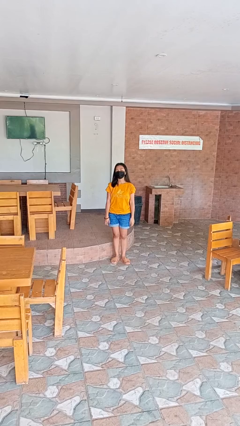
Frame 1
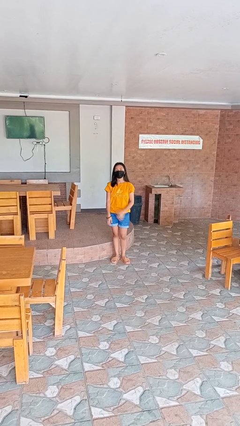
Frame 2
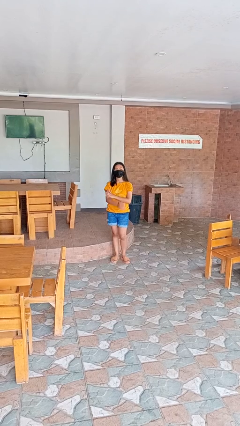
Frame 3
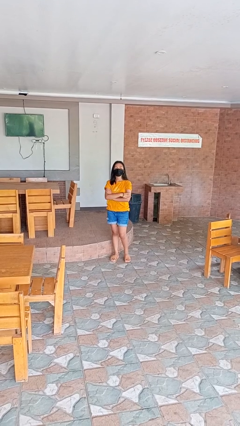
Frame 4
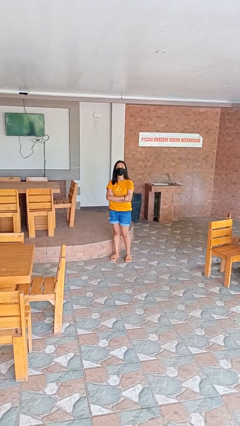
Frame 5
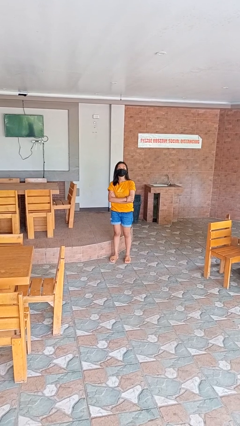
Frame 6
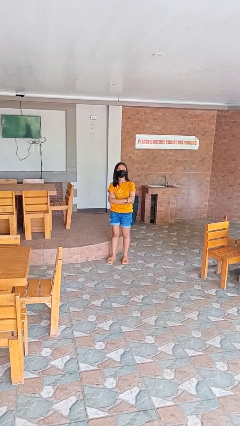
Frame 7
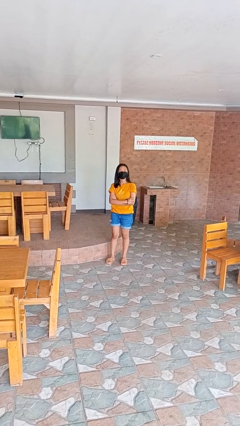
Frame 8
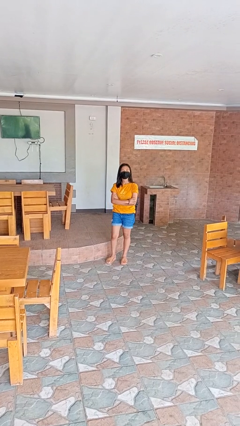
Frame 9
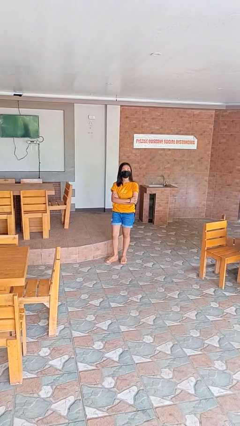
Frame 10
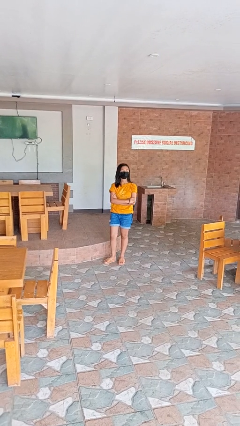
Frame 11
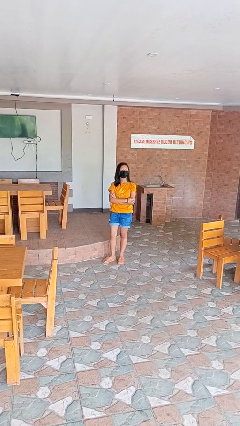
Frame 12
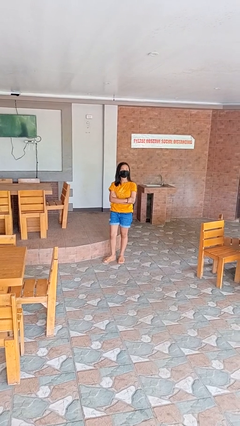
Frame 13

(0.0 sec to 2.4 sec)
person crosses arms

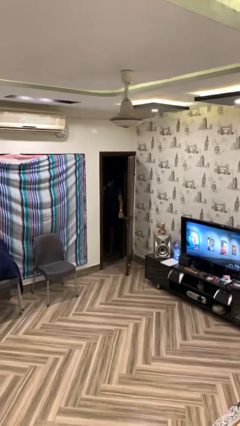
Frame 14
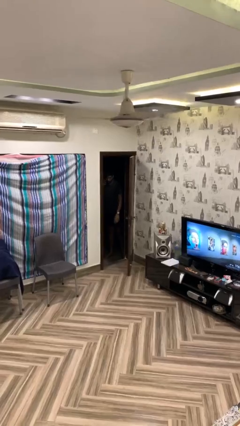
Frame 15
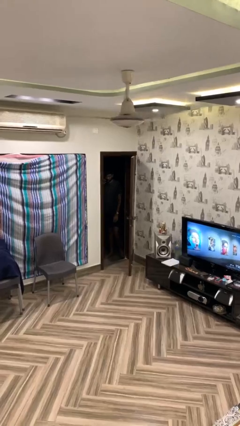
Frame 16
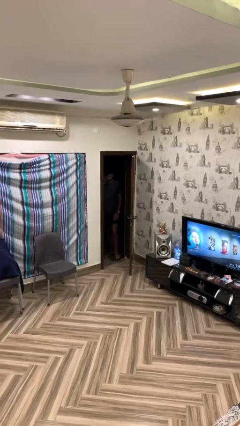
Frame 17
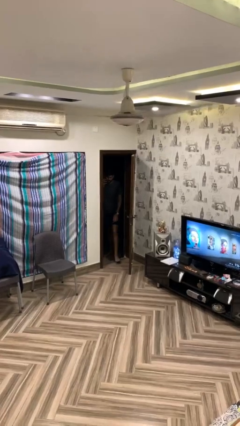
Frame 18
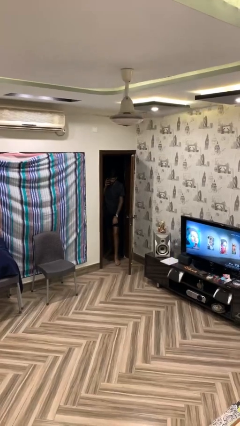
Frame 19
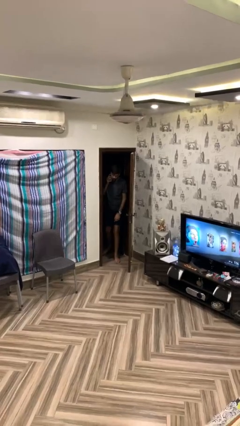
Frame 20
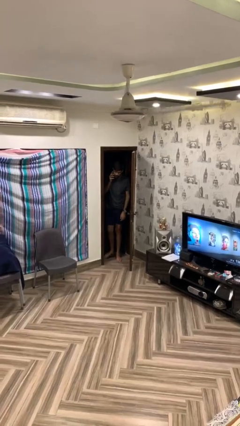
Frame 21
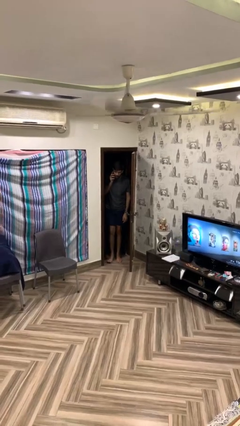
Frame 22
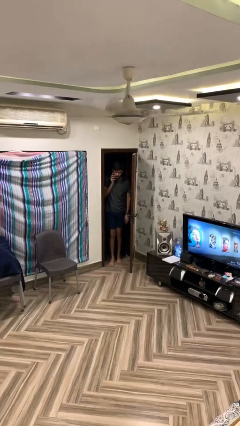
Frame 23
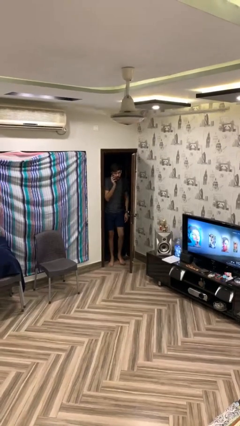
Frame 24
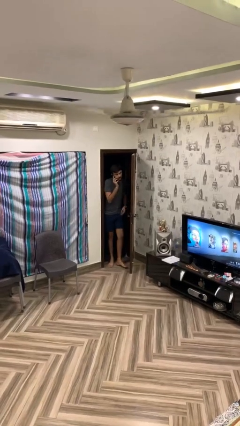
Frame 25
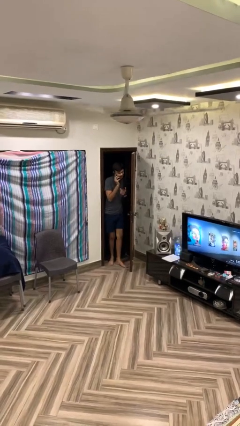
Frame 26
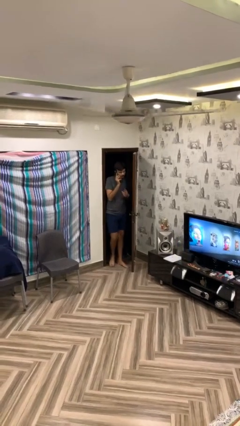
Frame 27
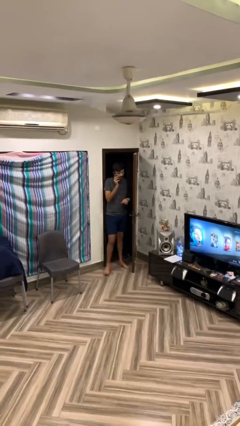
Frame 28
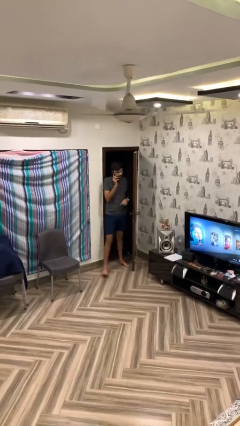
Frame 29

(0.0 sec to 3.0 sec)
person enters scene through structure

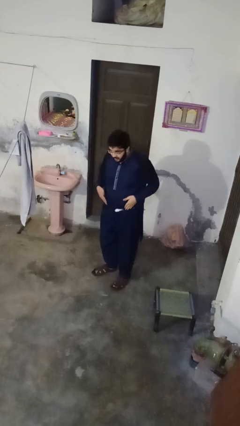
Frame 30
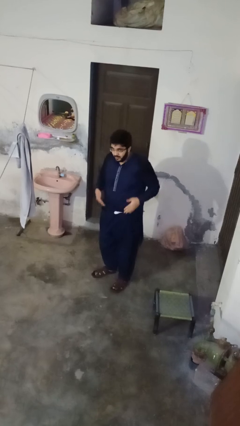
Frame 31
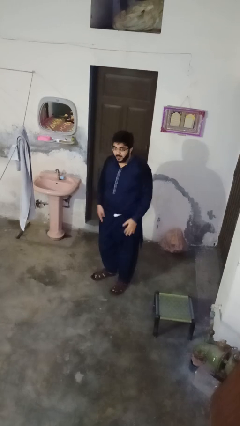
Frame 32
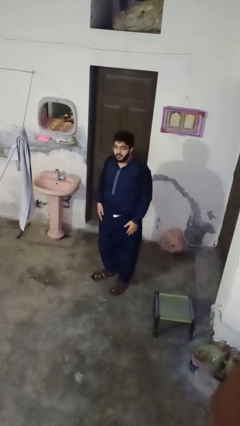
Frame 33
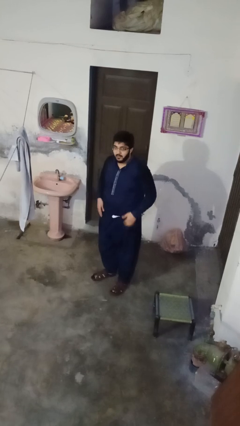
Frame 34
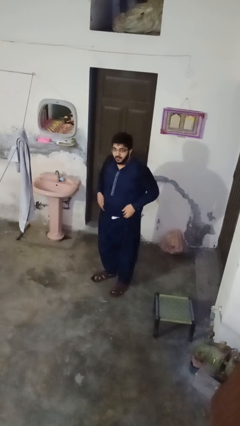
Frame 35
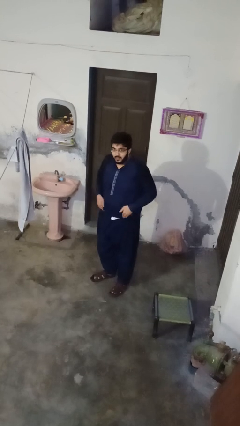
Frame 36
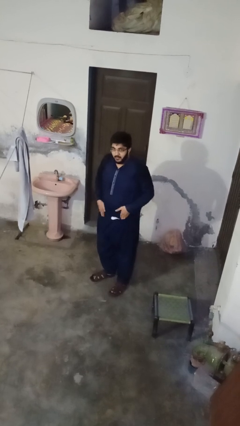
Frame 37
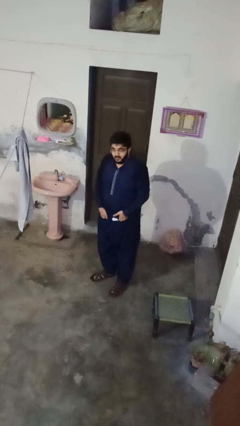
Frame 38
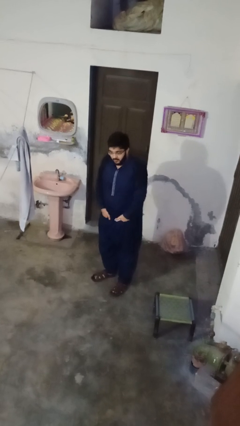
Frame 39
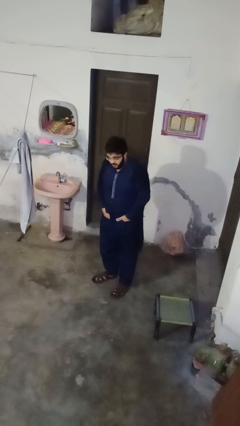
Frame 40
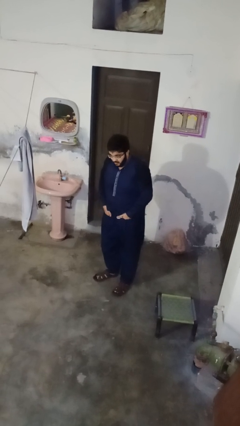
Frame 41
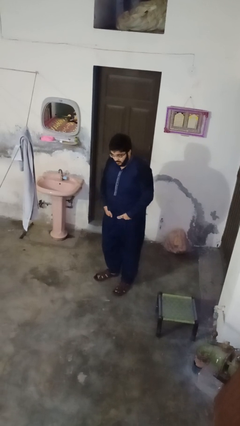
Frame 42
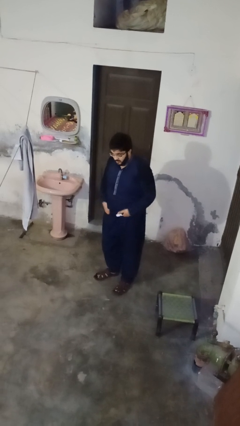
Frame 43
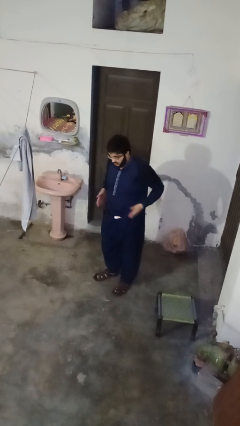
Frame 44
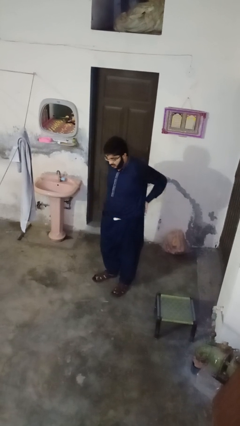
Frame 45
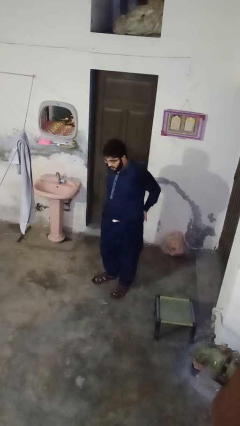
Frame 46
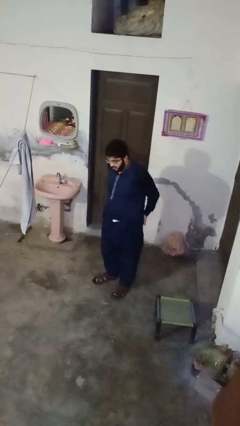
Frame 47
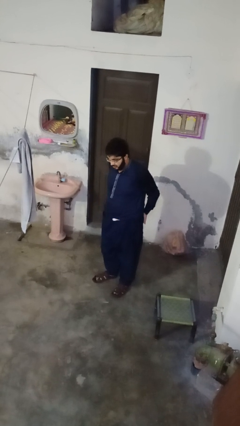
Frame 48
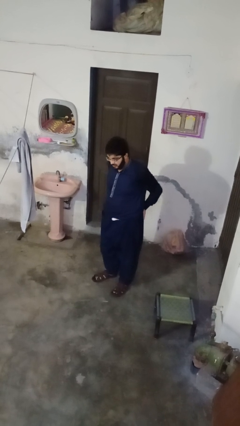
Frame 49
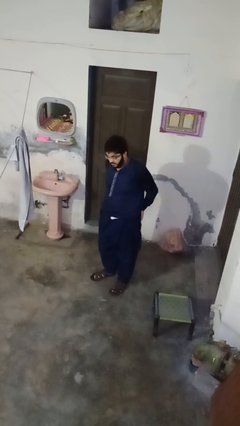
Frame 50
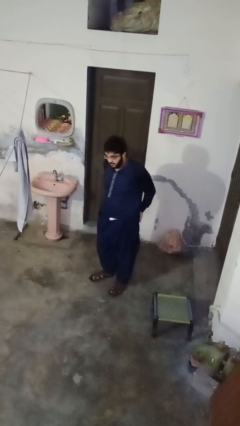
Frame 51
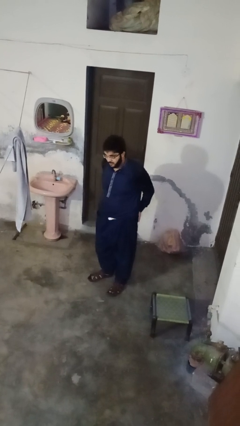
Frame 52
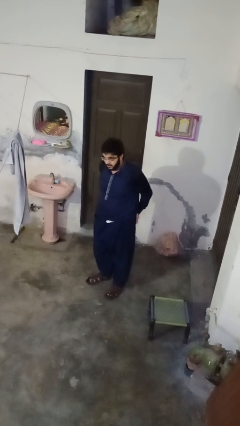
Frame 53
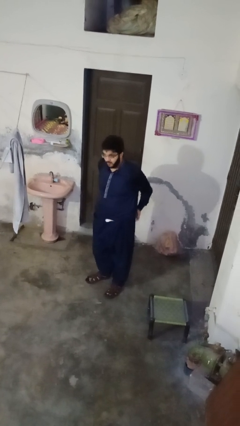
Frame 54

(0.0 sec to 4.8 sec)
person puts hands in back pockets

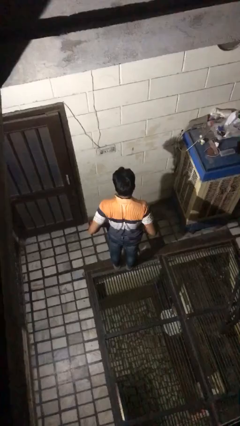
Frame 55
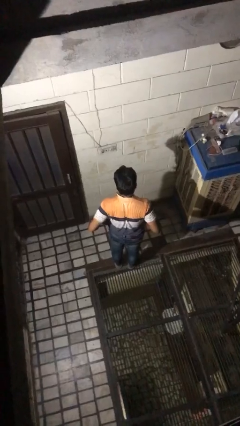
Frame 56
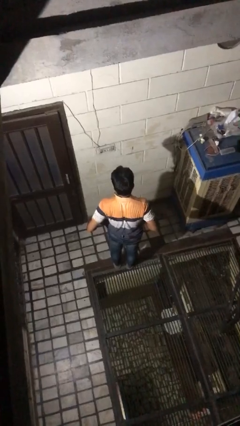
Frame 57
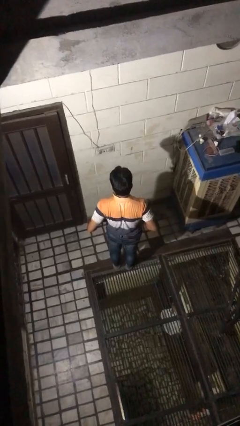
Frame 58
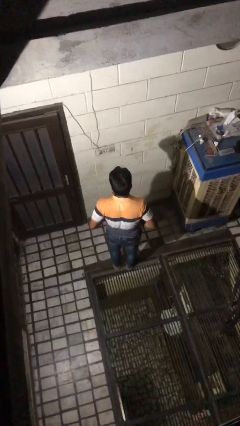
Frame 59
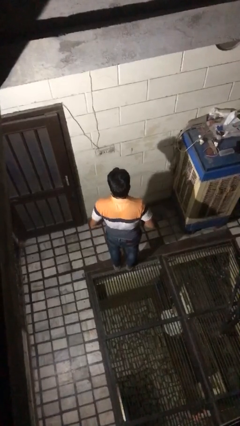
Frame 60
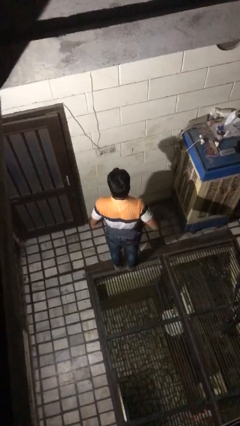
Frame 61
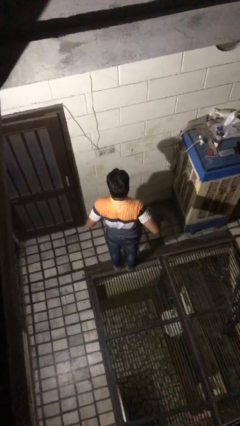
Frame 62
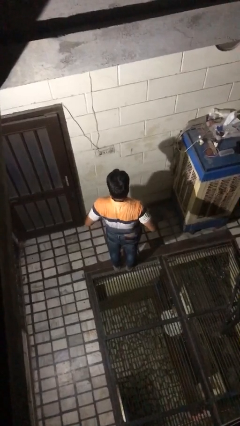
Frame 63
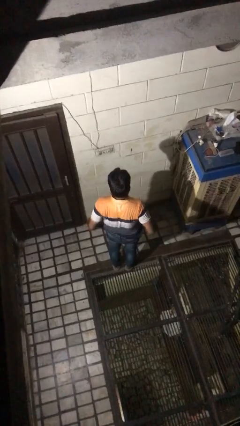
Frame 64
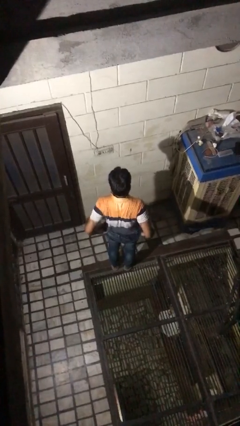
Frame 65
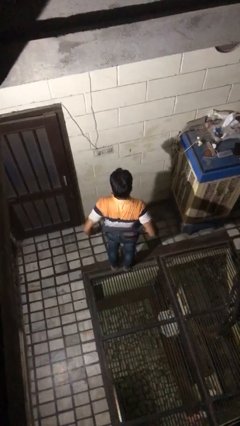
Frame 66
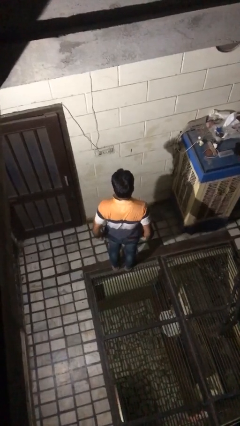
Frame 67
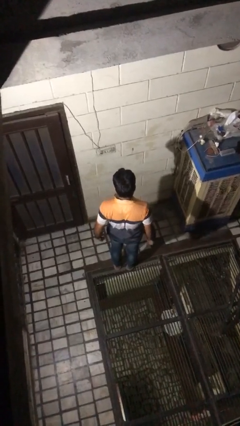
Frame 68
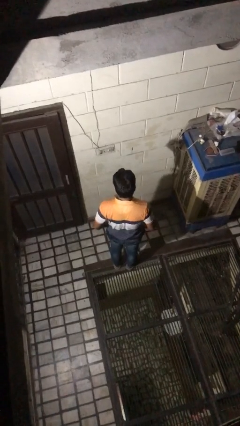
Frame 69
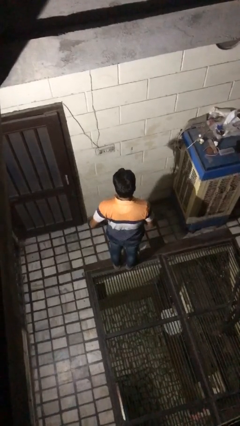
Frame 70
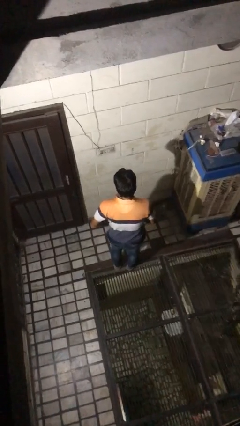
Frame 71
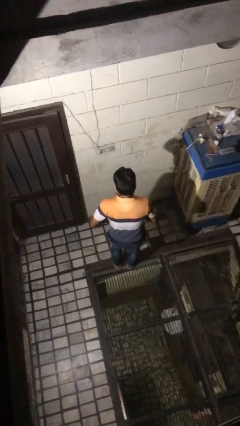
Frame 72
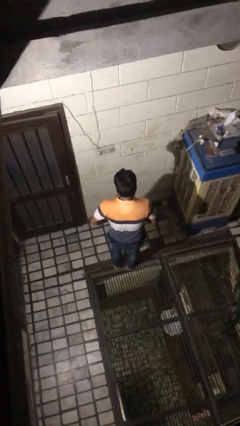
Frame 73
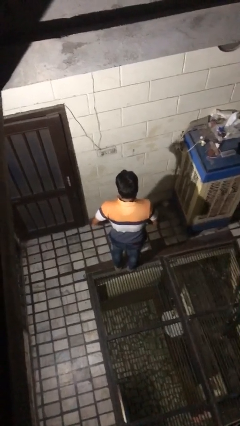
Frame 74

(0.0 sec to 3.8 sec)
person untucks shirt

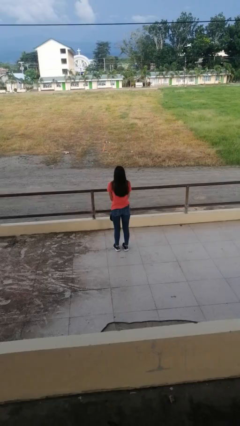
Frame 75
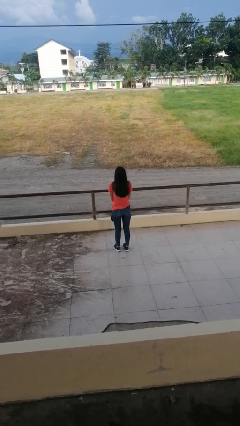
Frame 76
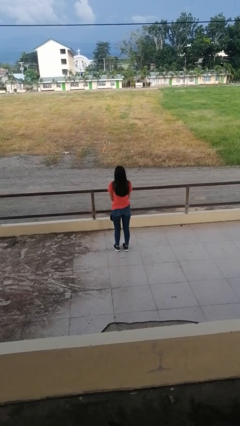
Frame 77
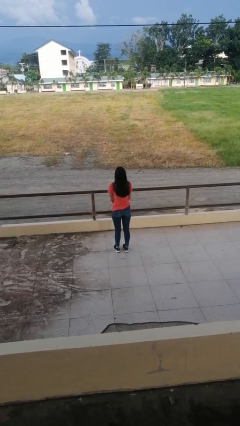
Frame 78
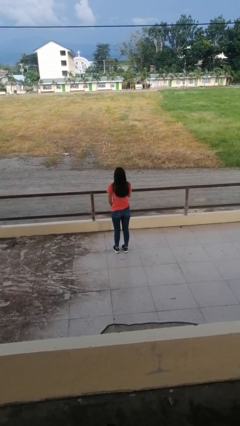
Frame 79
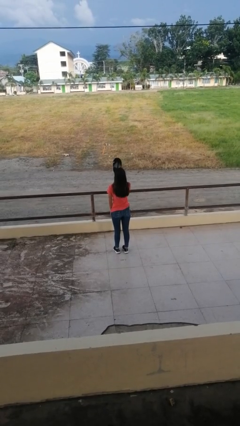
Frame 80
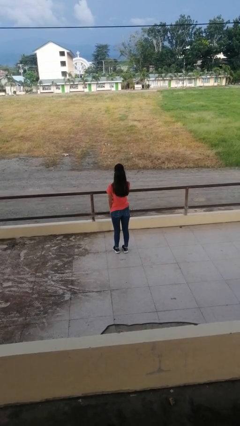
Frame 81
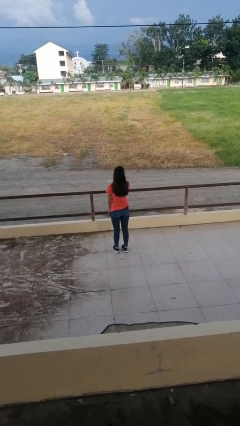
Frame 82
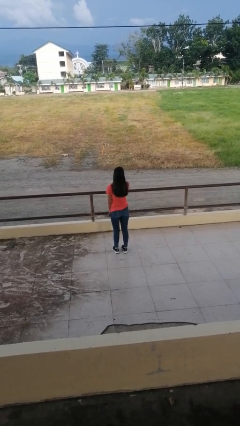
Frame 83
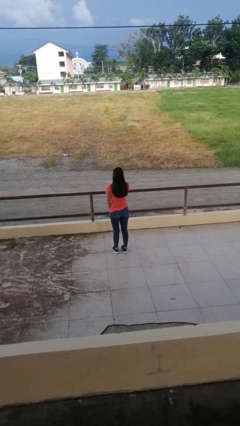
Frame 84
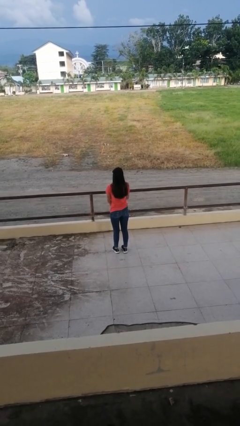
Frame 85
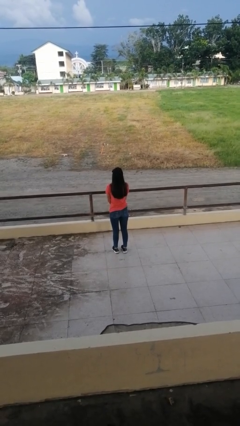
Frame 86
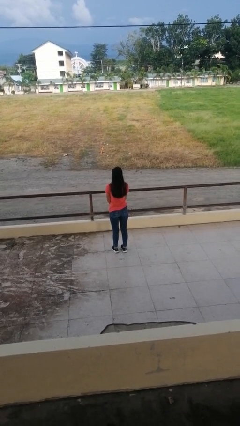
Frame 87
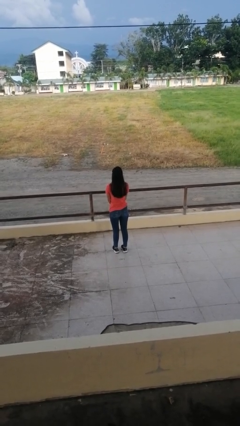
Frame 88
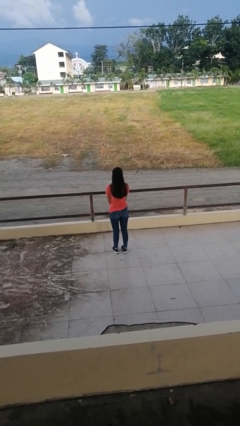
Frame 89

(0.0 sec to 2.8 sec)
person puts on hat

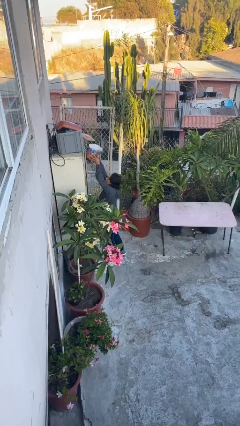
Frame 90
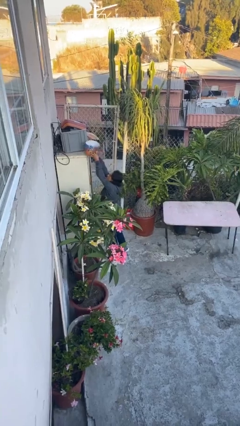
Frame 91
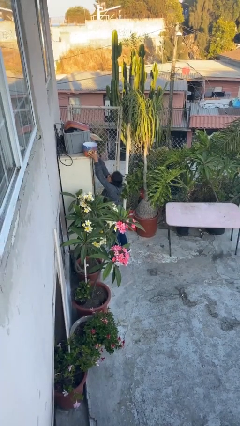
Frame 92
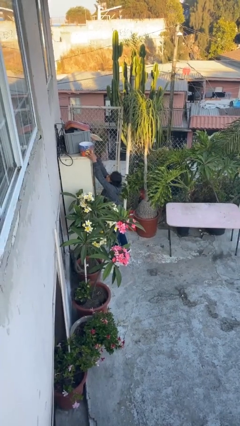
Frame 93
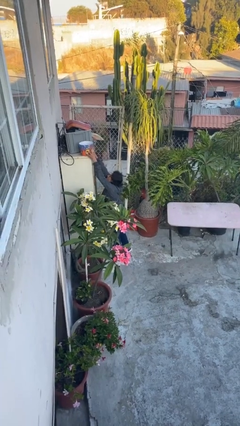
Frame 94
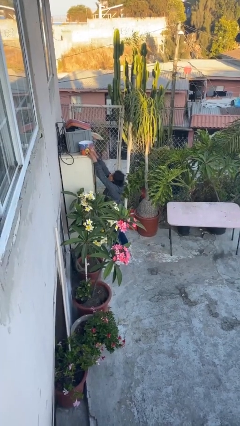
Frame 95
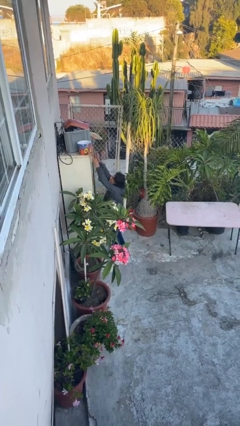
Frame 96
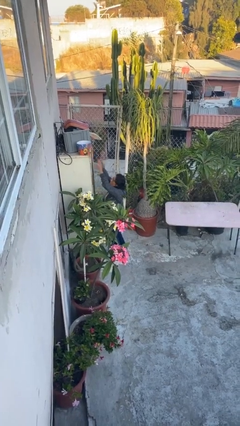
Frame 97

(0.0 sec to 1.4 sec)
person puts down object on shelf
